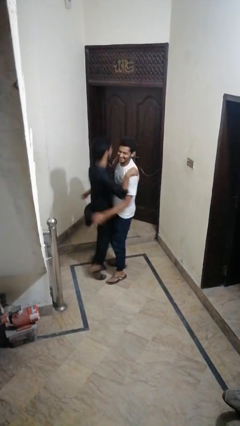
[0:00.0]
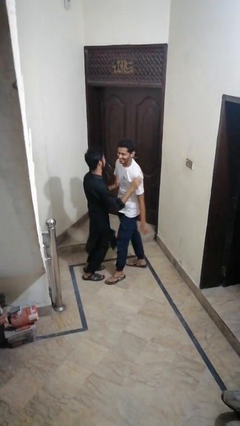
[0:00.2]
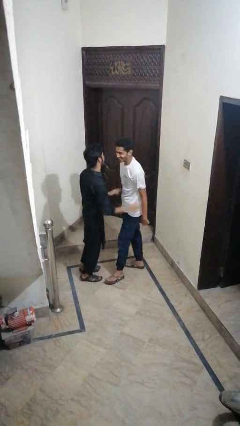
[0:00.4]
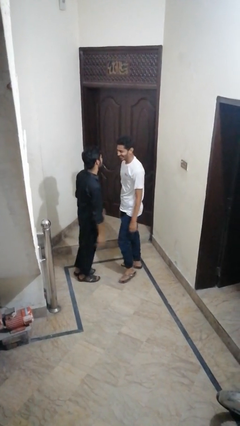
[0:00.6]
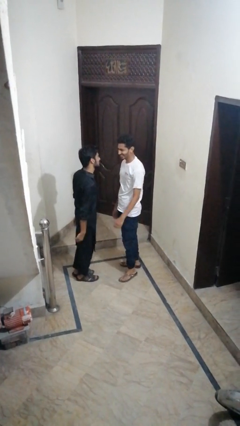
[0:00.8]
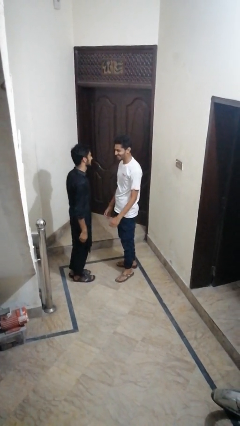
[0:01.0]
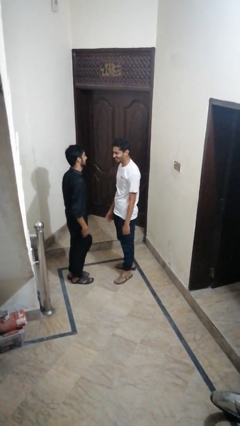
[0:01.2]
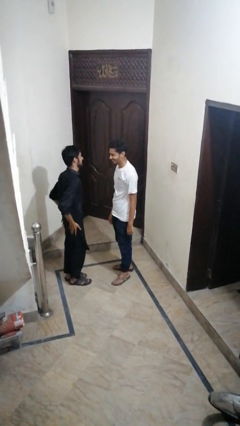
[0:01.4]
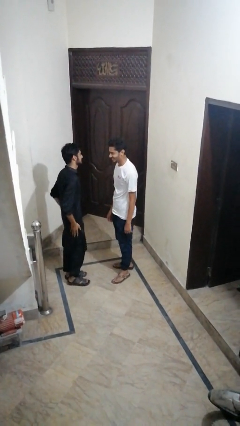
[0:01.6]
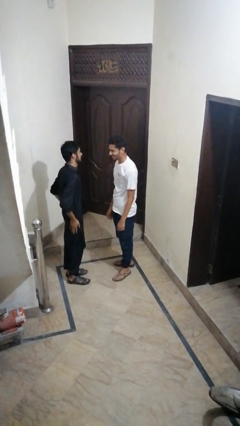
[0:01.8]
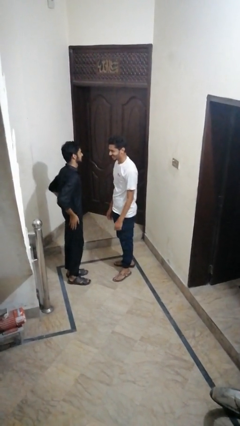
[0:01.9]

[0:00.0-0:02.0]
person puts on facemask

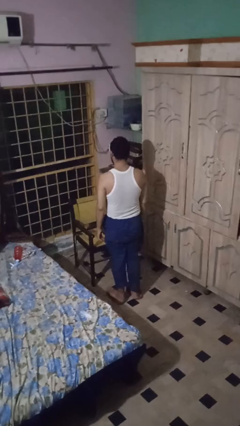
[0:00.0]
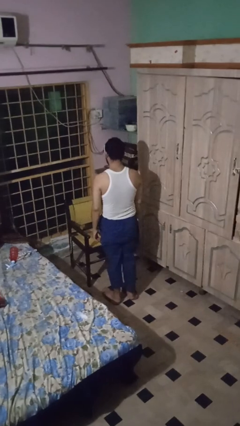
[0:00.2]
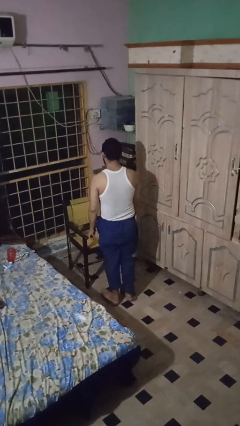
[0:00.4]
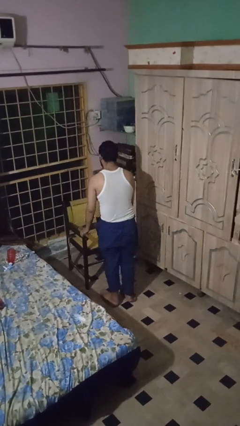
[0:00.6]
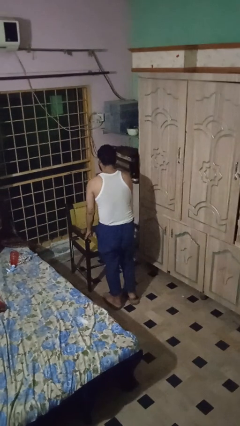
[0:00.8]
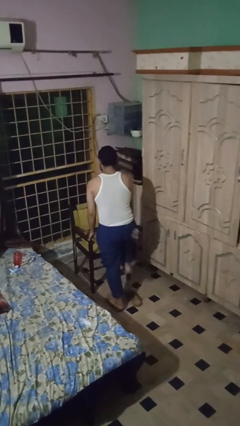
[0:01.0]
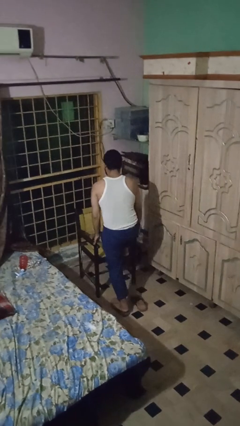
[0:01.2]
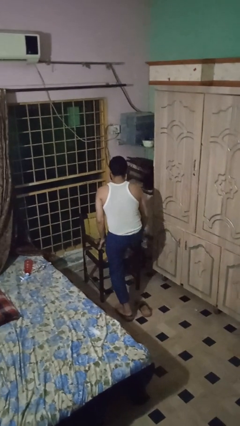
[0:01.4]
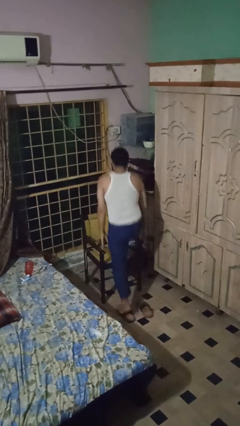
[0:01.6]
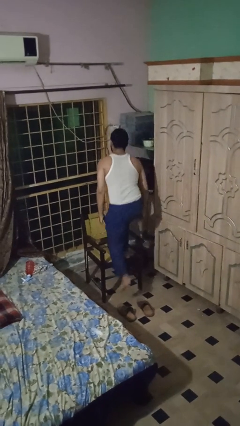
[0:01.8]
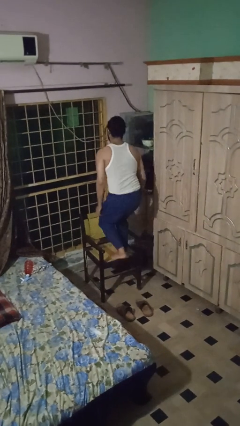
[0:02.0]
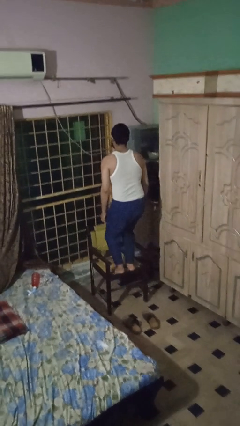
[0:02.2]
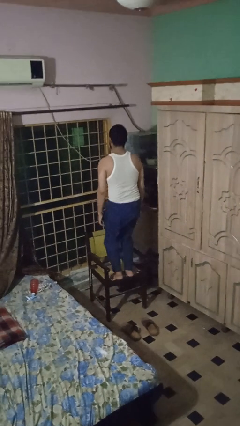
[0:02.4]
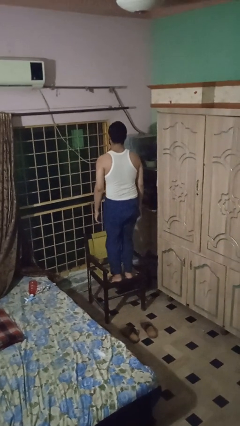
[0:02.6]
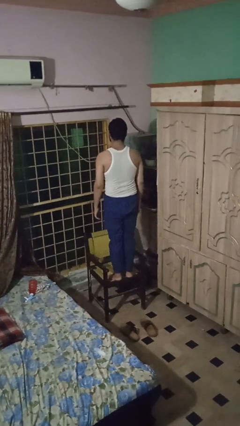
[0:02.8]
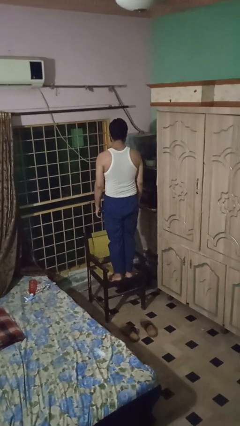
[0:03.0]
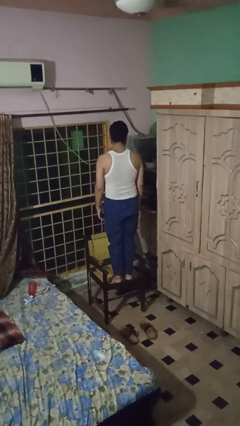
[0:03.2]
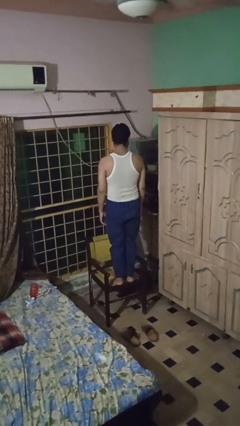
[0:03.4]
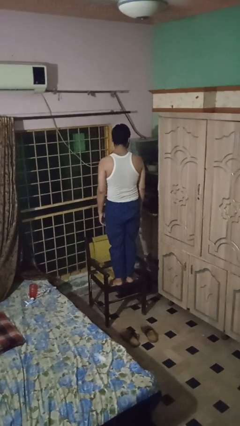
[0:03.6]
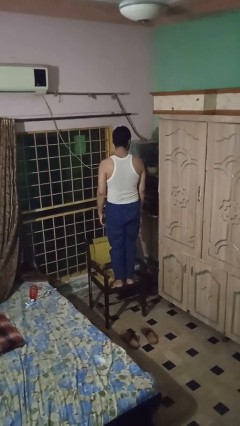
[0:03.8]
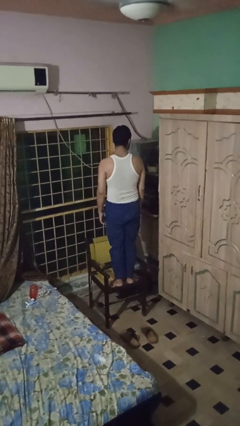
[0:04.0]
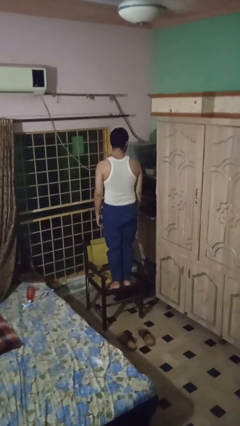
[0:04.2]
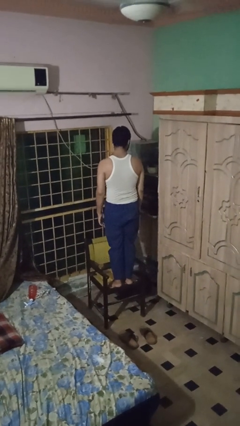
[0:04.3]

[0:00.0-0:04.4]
person climbs on chair

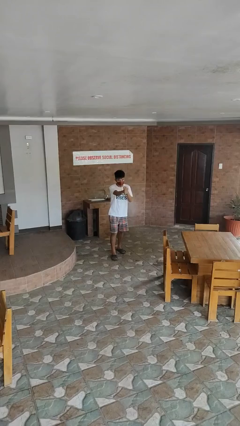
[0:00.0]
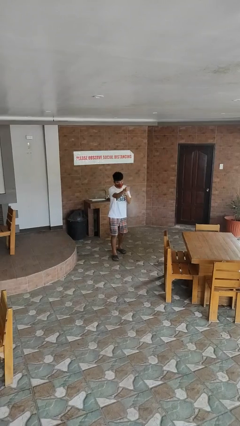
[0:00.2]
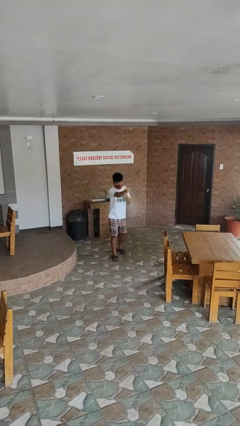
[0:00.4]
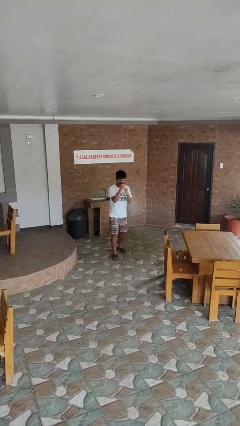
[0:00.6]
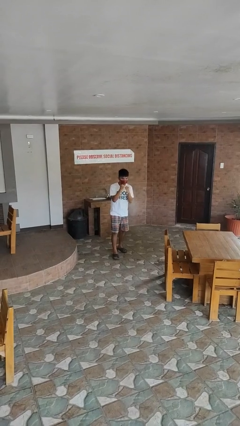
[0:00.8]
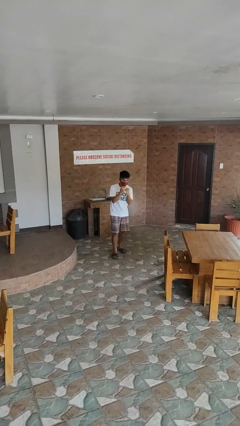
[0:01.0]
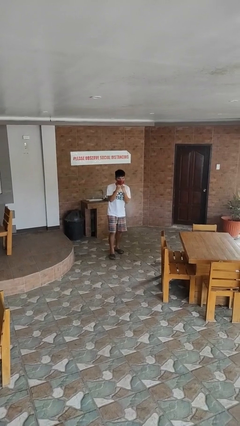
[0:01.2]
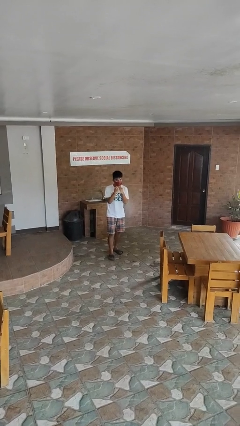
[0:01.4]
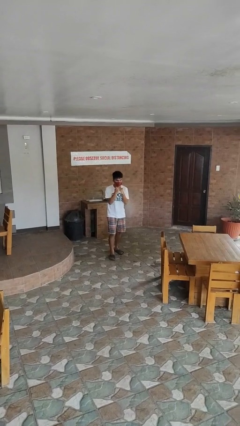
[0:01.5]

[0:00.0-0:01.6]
person punches

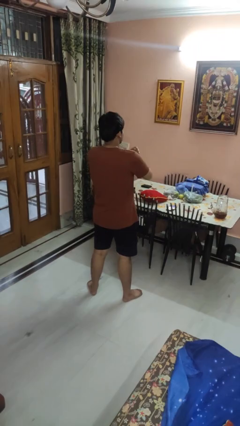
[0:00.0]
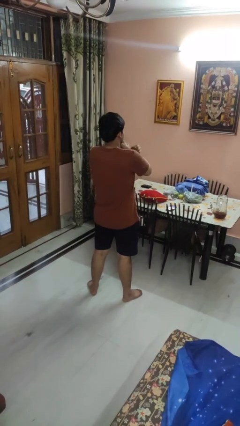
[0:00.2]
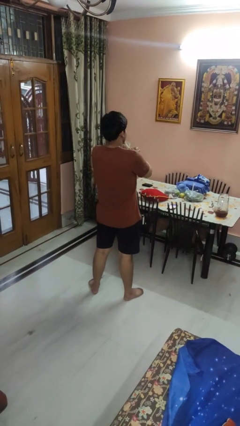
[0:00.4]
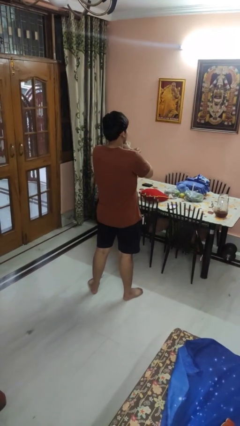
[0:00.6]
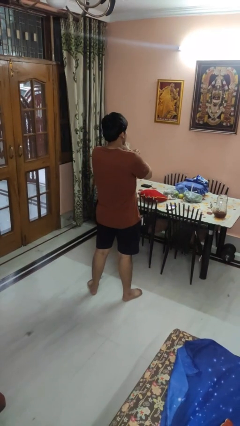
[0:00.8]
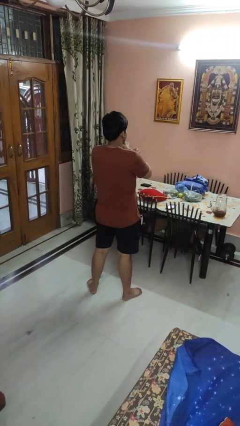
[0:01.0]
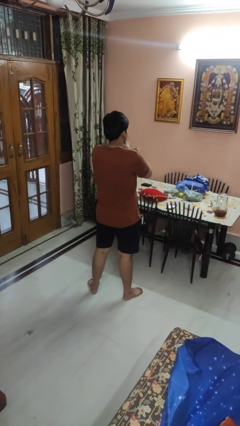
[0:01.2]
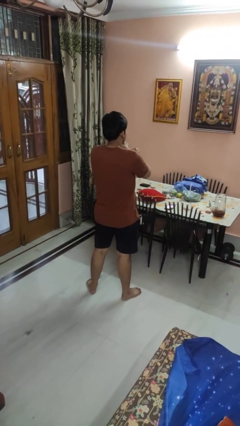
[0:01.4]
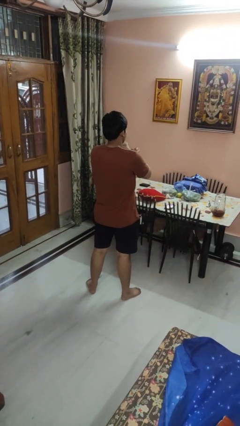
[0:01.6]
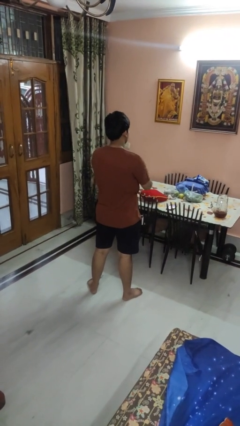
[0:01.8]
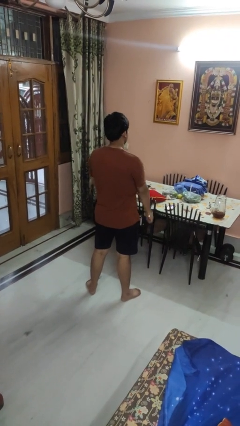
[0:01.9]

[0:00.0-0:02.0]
person gestures arms x

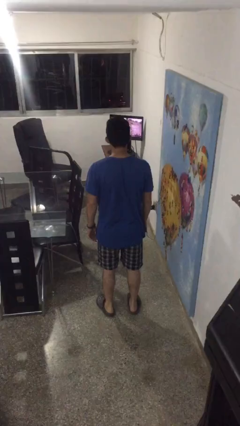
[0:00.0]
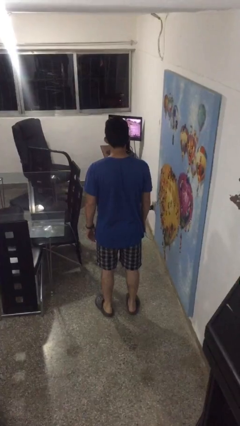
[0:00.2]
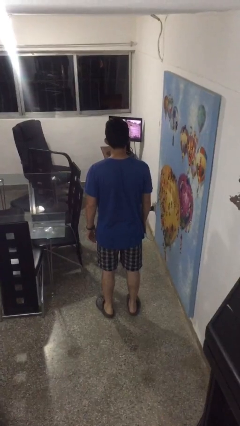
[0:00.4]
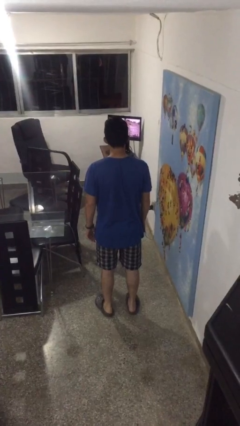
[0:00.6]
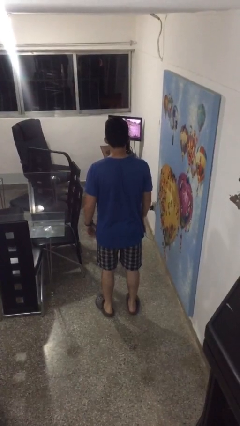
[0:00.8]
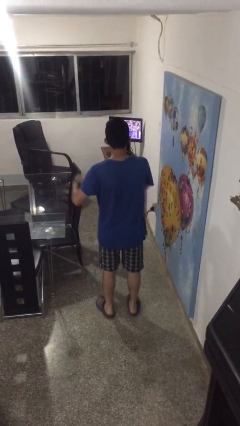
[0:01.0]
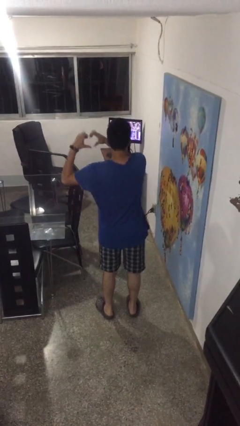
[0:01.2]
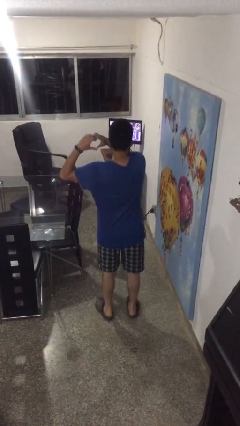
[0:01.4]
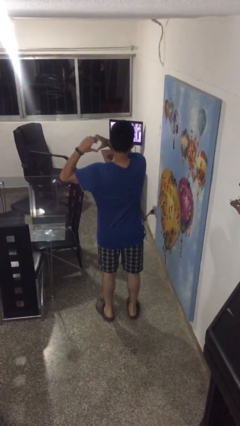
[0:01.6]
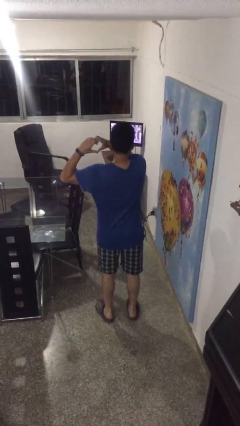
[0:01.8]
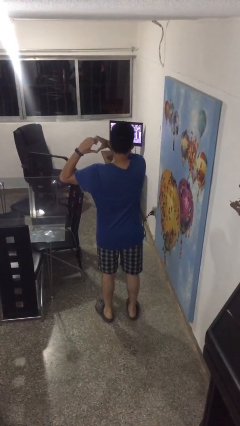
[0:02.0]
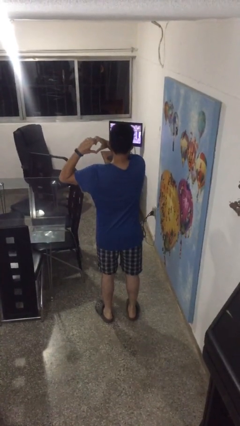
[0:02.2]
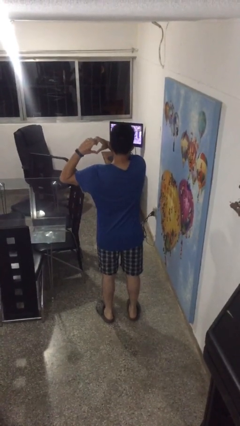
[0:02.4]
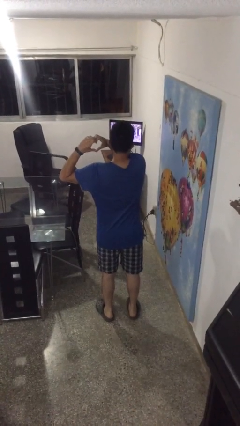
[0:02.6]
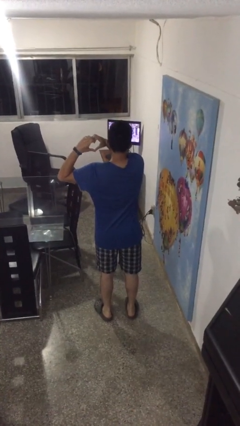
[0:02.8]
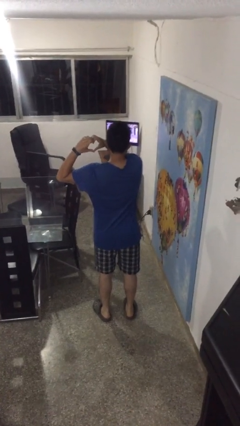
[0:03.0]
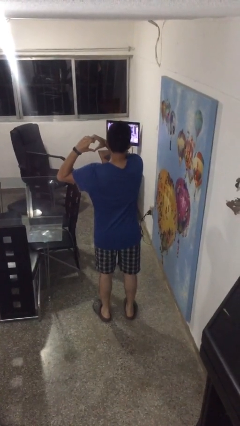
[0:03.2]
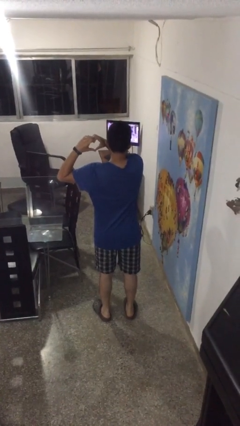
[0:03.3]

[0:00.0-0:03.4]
person gestures heart

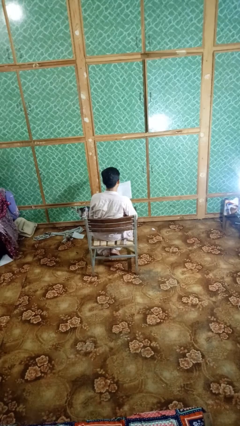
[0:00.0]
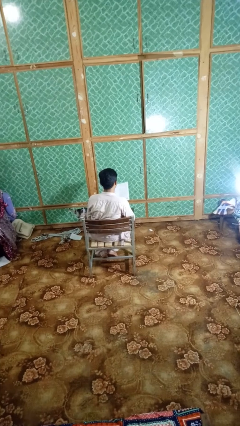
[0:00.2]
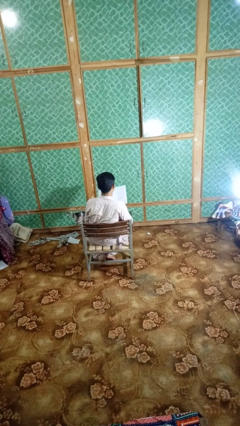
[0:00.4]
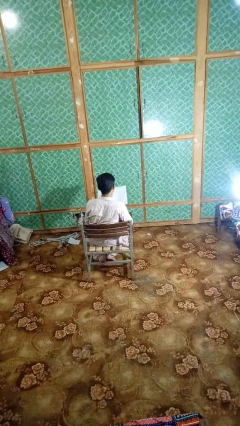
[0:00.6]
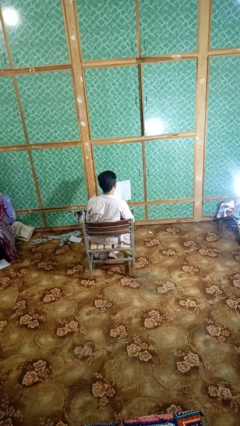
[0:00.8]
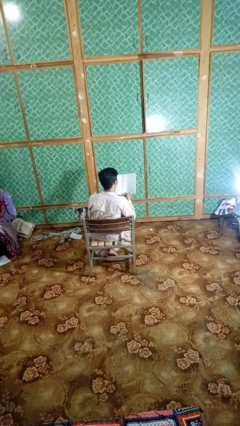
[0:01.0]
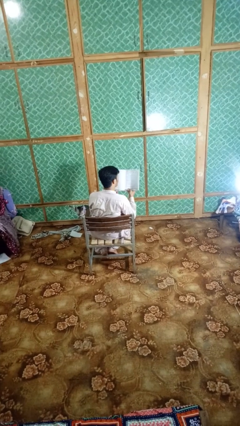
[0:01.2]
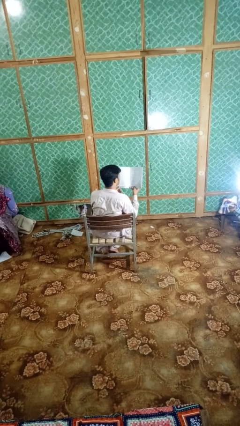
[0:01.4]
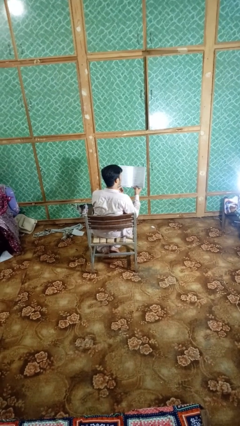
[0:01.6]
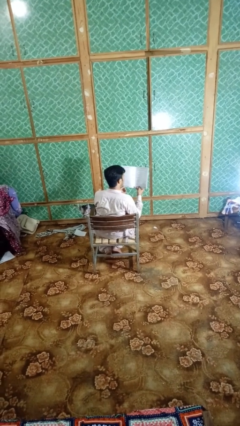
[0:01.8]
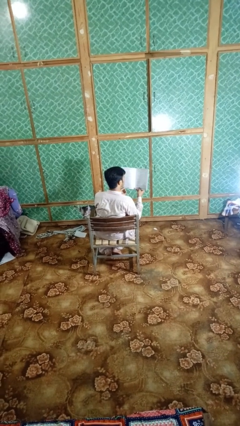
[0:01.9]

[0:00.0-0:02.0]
person reads magazine

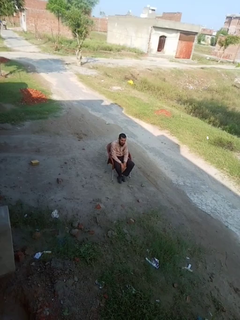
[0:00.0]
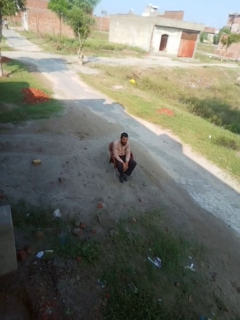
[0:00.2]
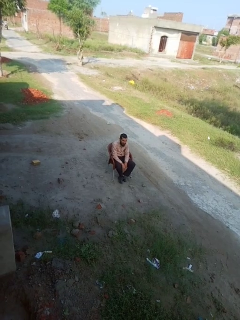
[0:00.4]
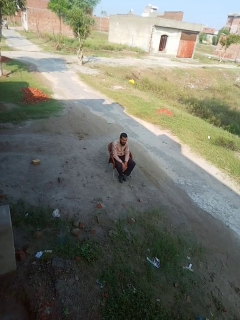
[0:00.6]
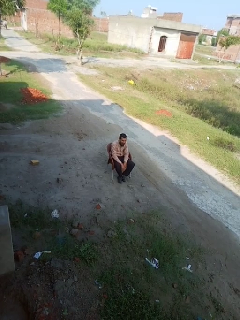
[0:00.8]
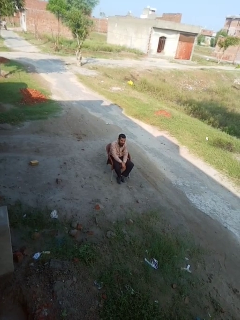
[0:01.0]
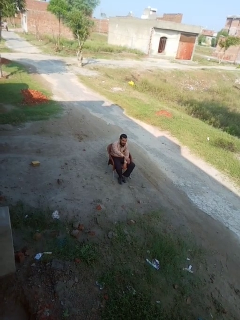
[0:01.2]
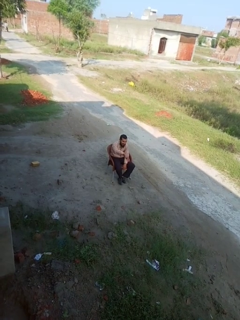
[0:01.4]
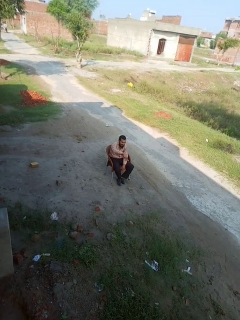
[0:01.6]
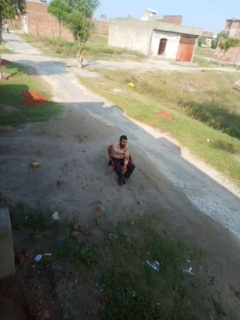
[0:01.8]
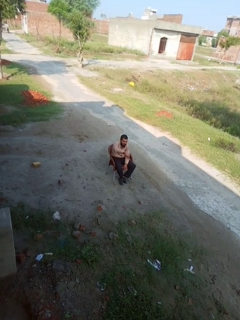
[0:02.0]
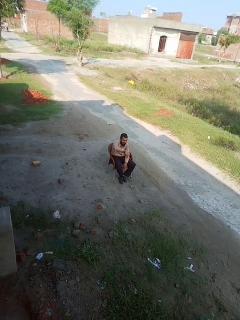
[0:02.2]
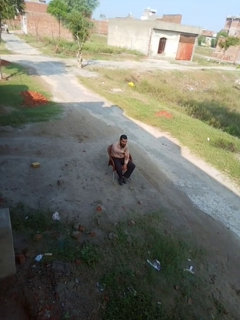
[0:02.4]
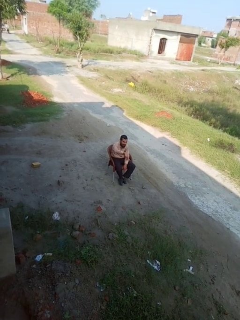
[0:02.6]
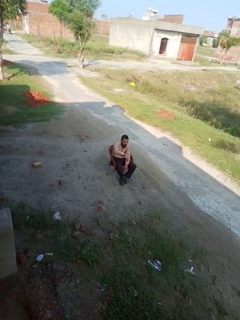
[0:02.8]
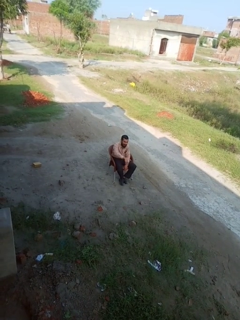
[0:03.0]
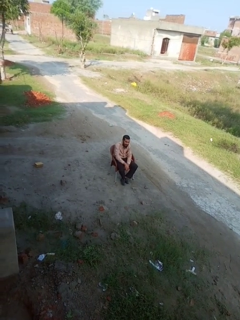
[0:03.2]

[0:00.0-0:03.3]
person gestures hang loose
